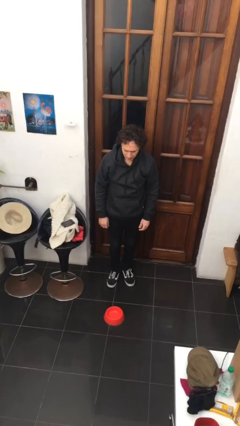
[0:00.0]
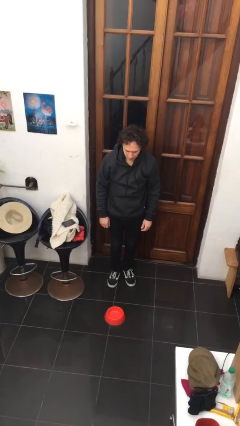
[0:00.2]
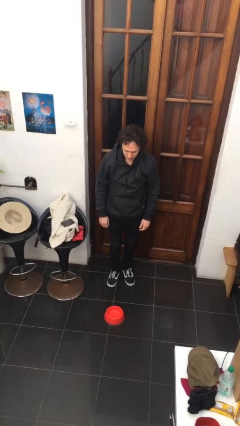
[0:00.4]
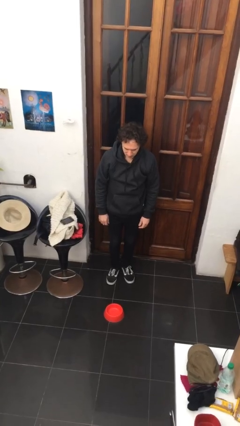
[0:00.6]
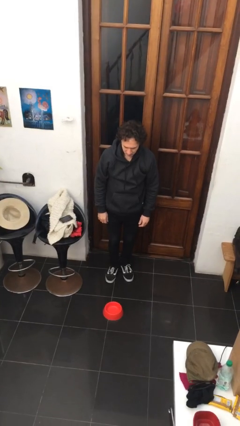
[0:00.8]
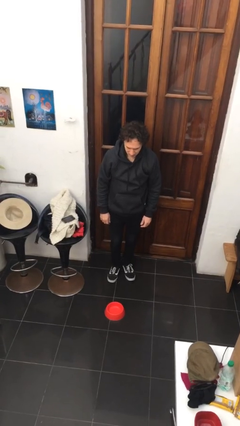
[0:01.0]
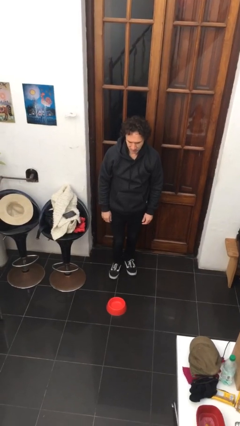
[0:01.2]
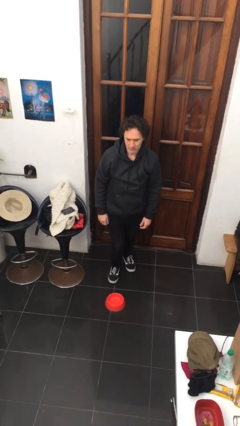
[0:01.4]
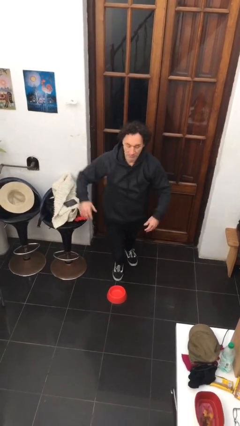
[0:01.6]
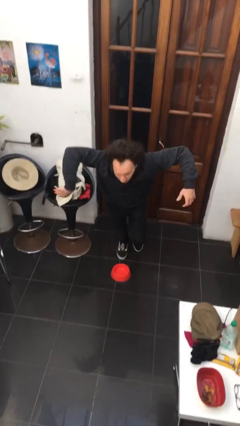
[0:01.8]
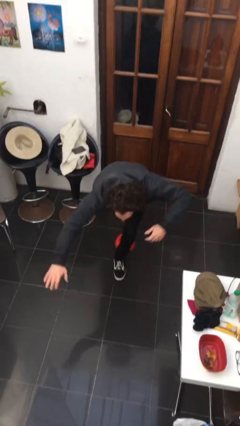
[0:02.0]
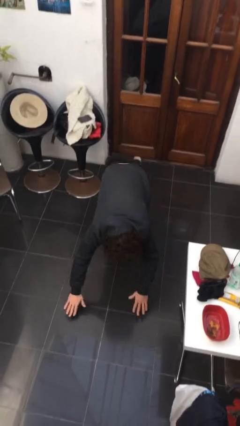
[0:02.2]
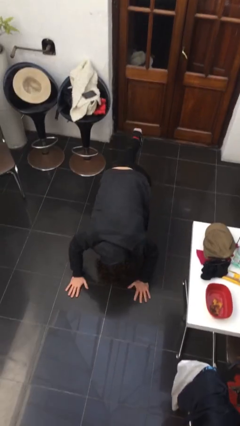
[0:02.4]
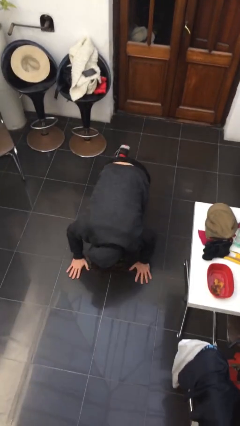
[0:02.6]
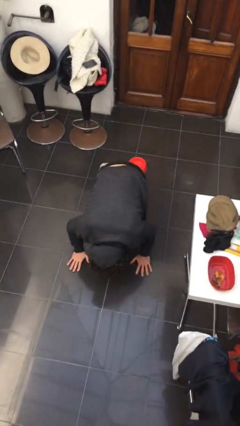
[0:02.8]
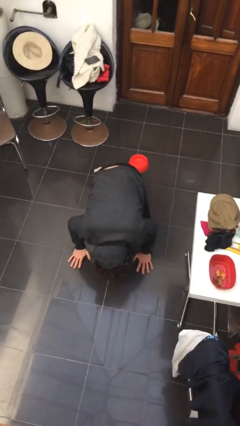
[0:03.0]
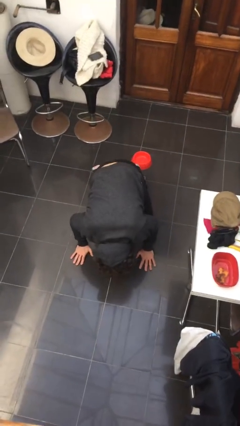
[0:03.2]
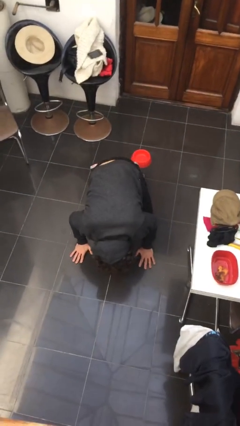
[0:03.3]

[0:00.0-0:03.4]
person trips on object on floor

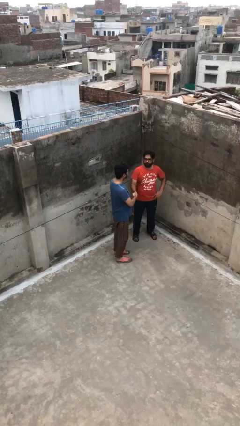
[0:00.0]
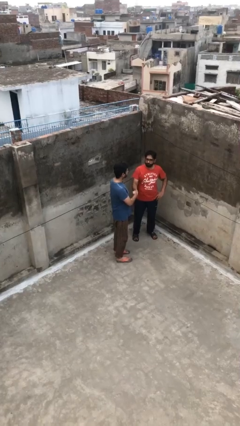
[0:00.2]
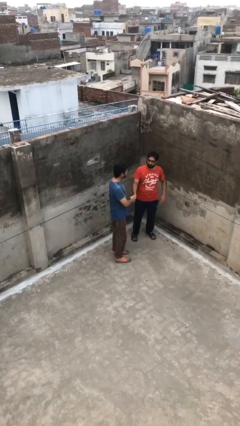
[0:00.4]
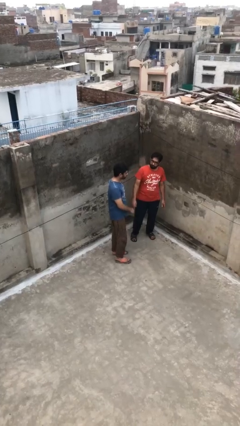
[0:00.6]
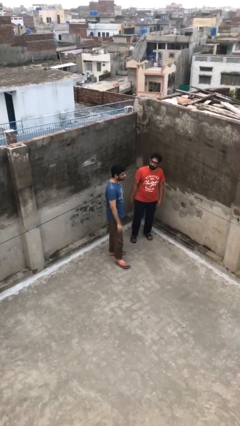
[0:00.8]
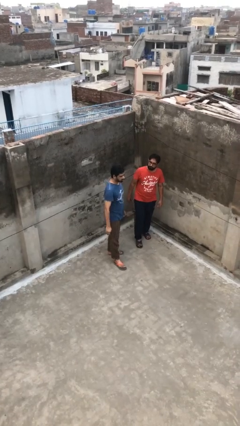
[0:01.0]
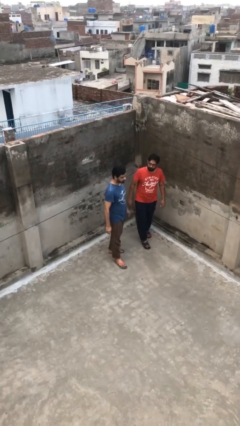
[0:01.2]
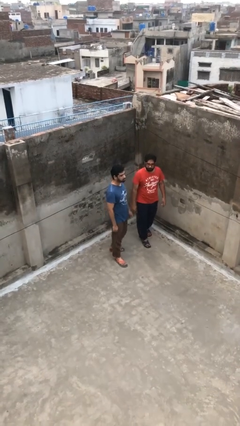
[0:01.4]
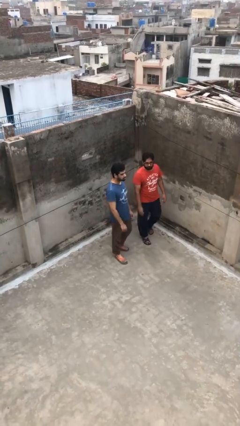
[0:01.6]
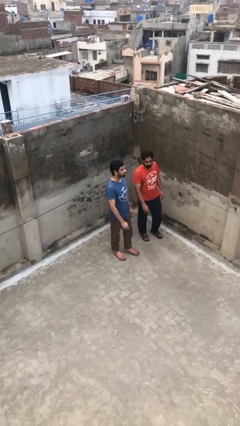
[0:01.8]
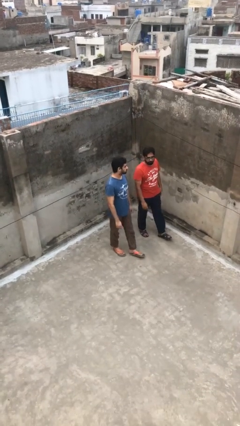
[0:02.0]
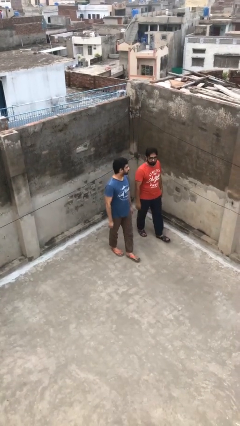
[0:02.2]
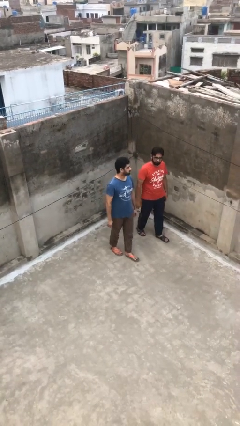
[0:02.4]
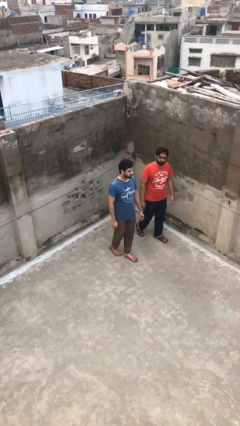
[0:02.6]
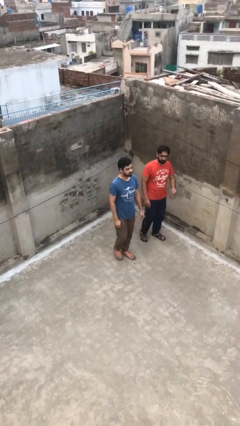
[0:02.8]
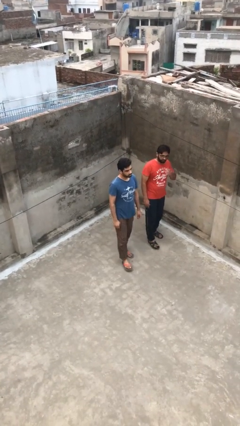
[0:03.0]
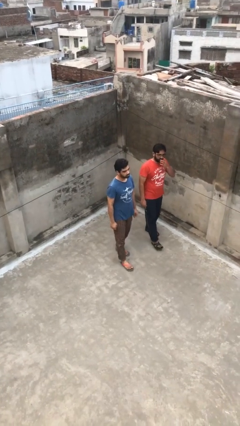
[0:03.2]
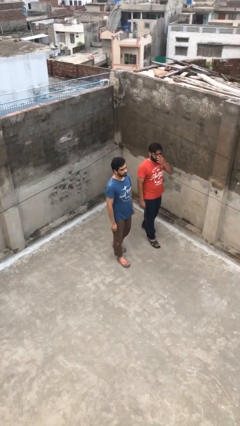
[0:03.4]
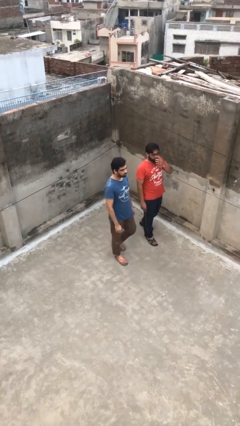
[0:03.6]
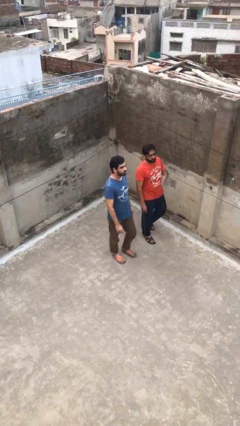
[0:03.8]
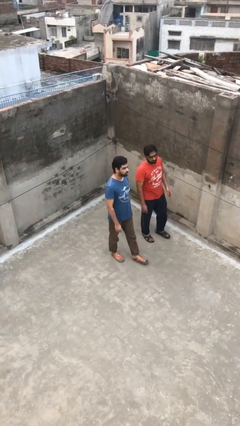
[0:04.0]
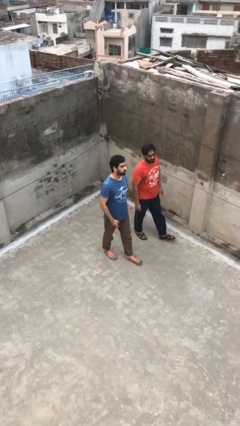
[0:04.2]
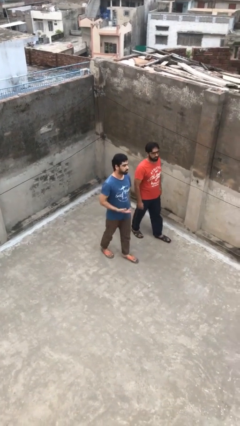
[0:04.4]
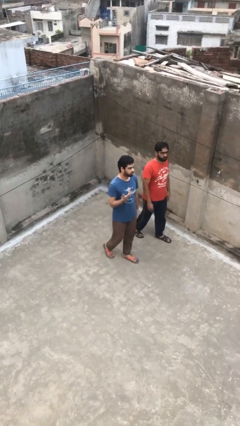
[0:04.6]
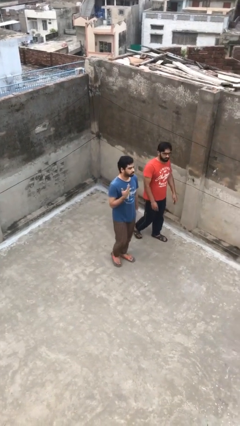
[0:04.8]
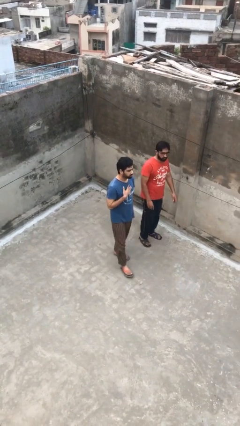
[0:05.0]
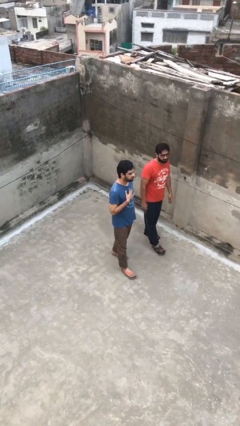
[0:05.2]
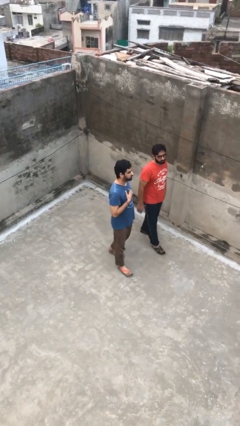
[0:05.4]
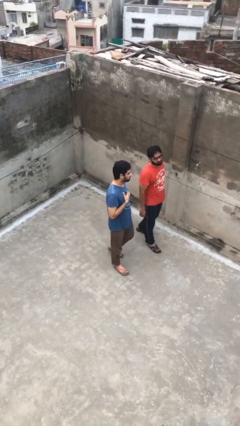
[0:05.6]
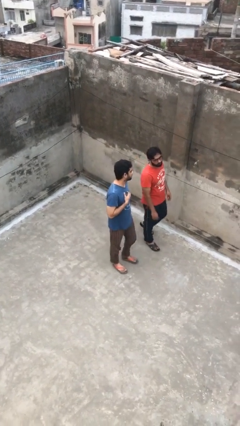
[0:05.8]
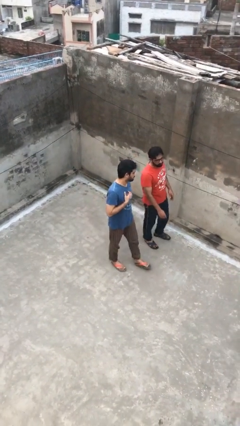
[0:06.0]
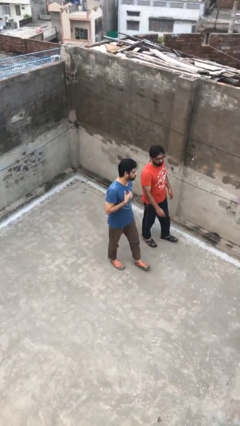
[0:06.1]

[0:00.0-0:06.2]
person talks to person

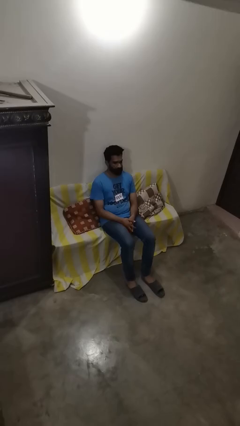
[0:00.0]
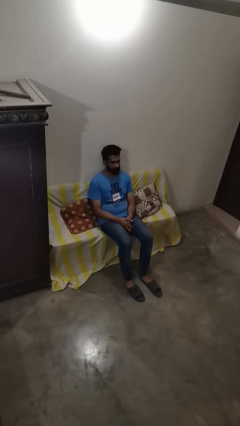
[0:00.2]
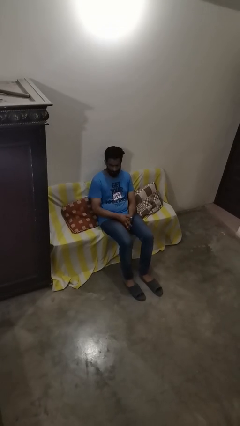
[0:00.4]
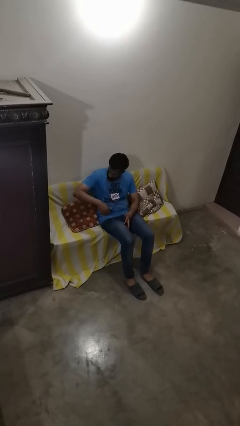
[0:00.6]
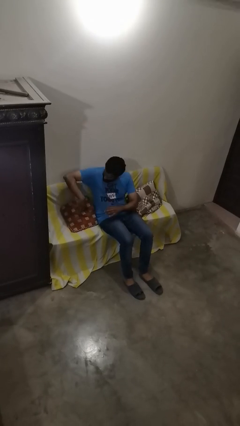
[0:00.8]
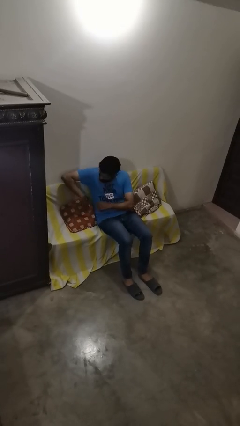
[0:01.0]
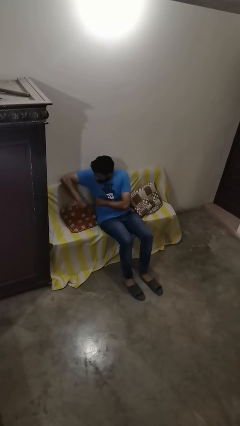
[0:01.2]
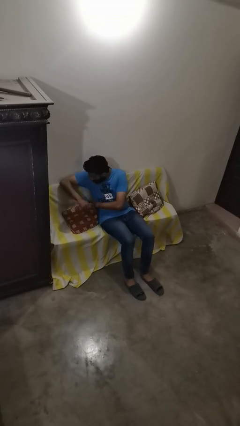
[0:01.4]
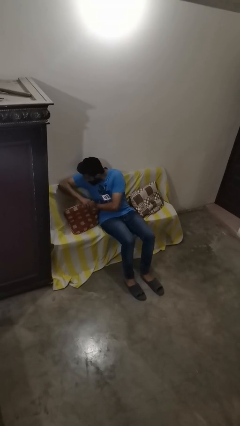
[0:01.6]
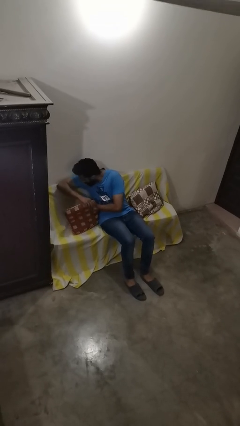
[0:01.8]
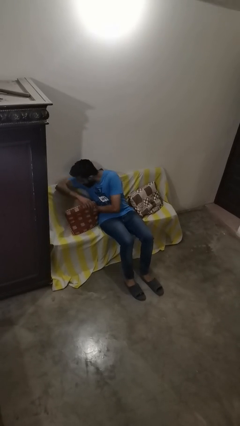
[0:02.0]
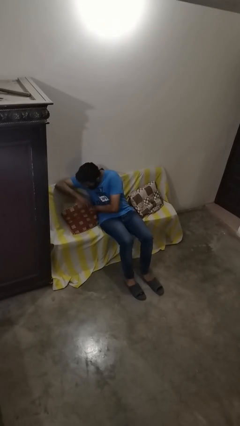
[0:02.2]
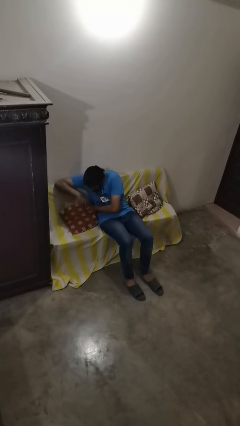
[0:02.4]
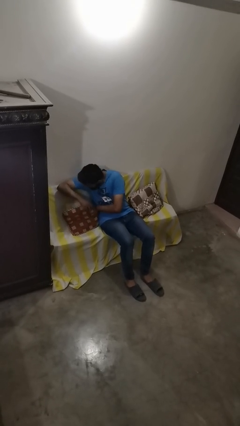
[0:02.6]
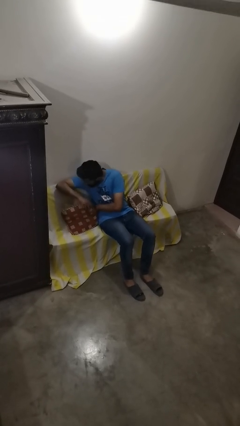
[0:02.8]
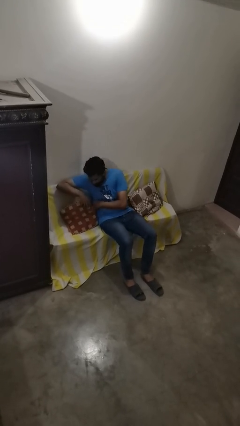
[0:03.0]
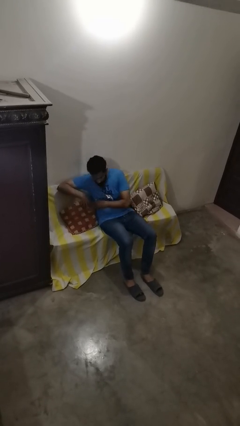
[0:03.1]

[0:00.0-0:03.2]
person searches in couch

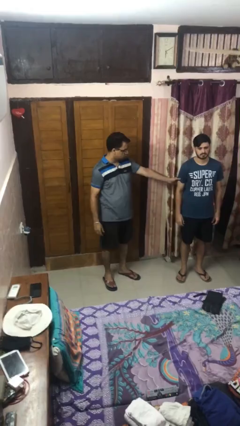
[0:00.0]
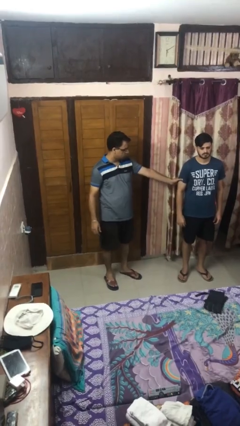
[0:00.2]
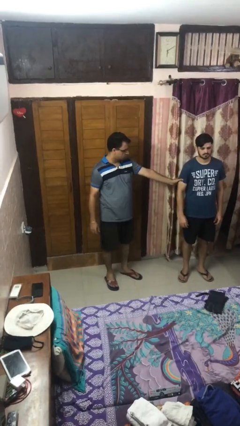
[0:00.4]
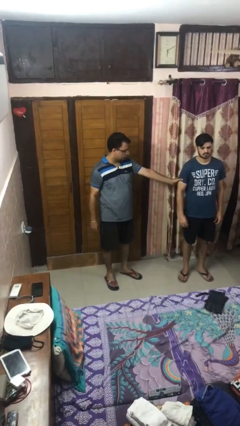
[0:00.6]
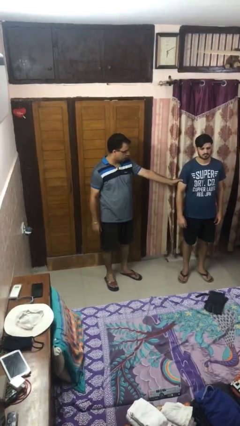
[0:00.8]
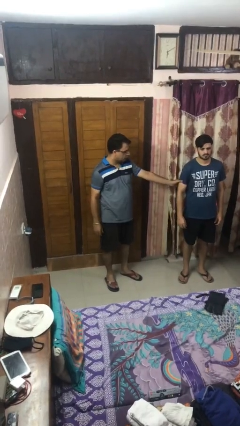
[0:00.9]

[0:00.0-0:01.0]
person grabs person by bicep

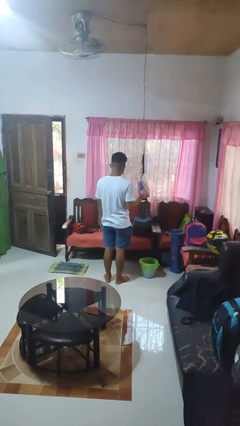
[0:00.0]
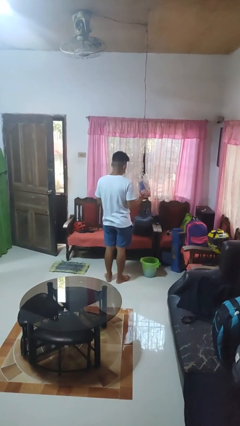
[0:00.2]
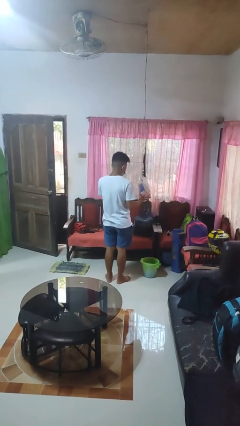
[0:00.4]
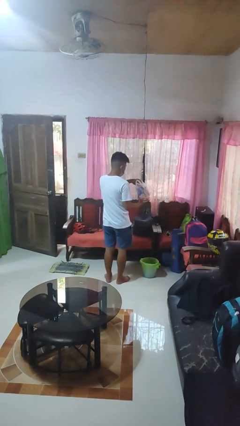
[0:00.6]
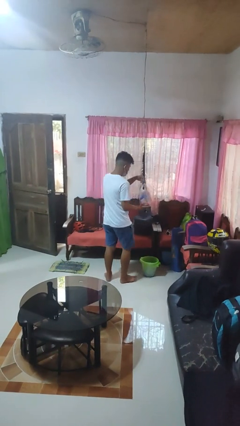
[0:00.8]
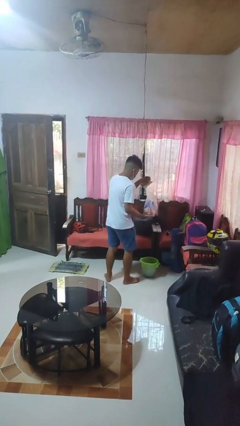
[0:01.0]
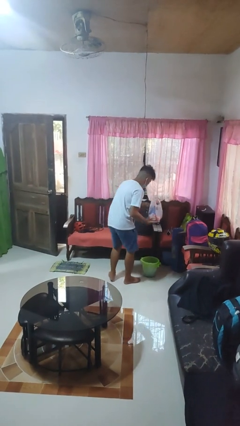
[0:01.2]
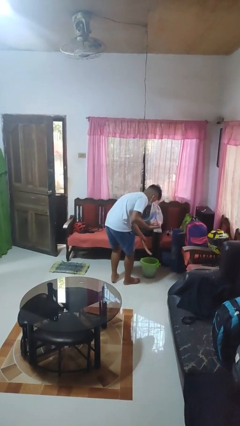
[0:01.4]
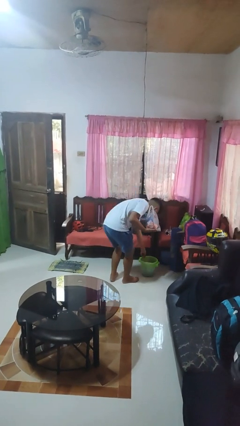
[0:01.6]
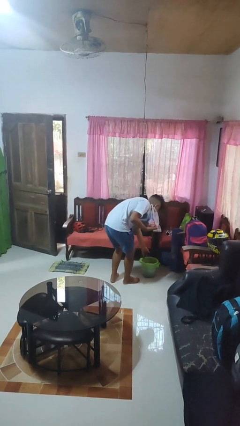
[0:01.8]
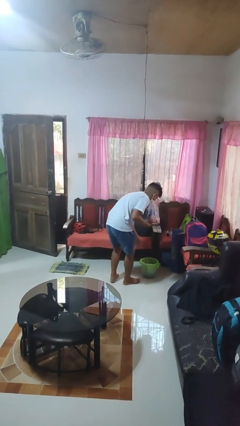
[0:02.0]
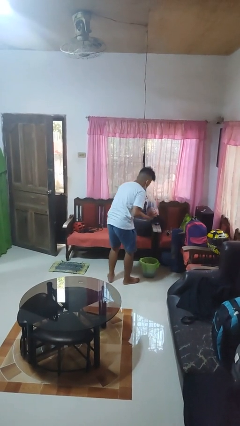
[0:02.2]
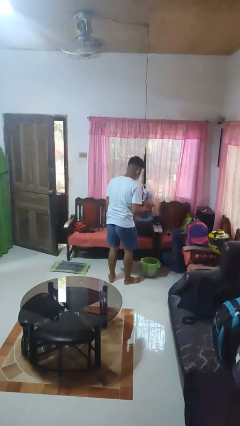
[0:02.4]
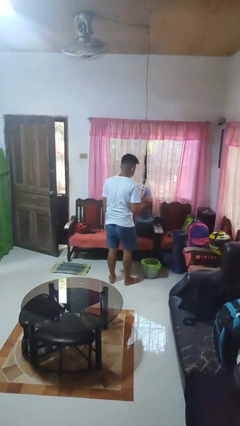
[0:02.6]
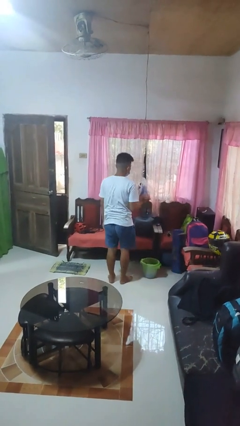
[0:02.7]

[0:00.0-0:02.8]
person discards trash

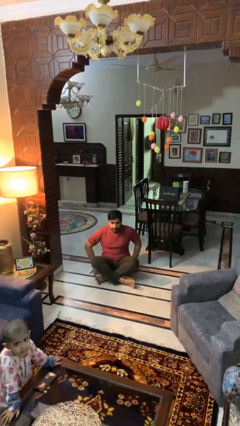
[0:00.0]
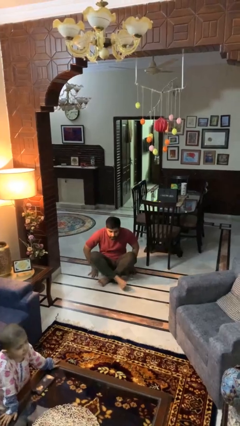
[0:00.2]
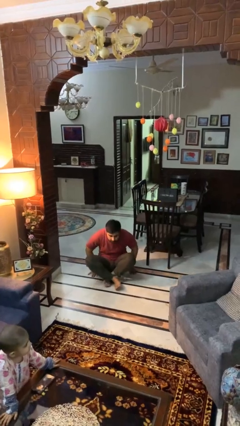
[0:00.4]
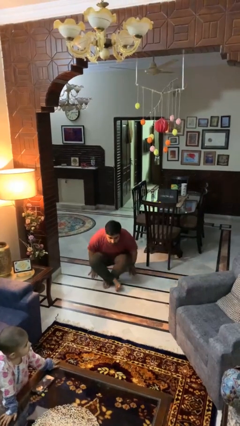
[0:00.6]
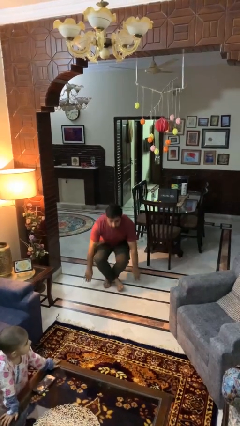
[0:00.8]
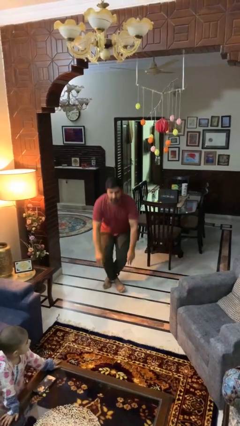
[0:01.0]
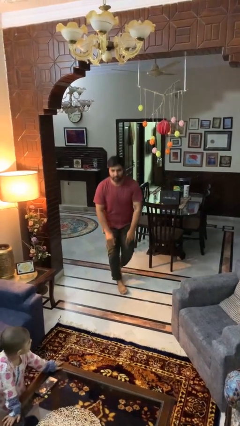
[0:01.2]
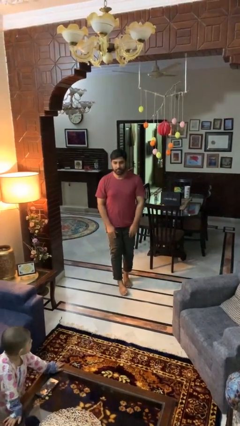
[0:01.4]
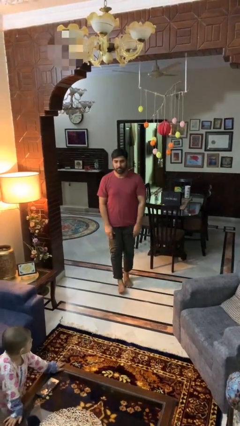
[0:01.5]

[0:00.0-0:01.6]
person stands up from floor
